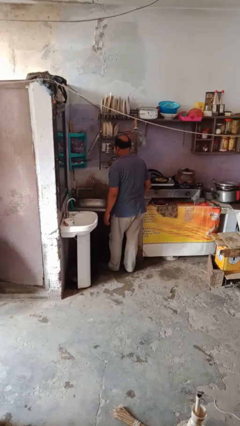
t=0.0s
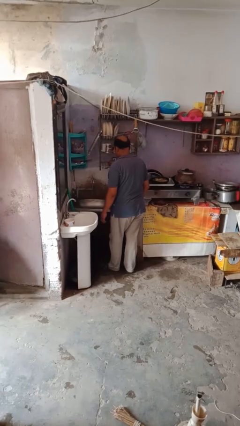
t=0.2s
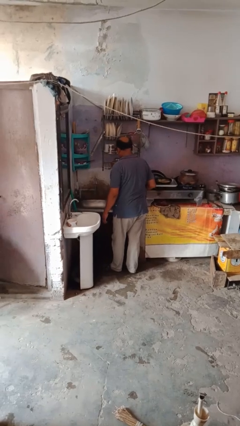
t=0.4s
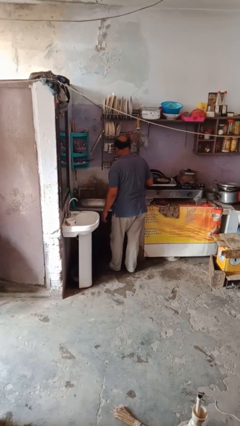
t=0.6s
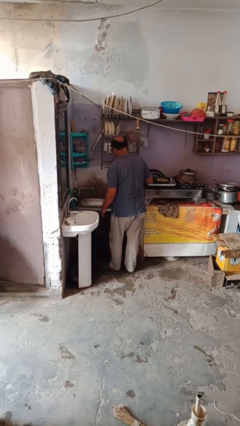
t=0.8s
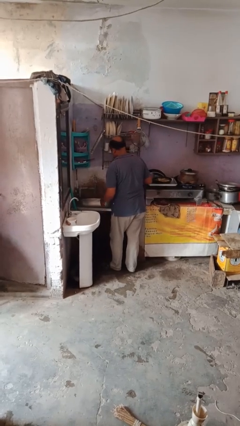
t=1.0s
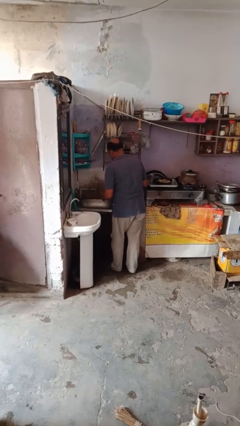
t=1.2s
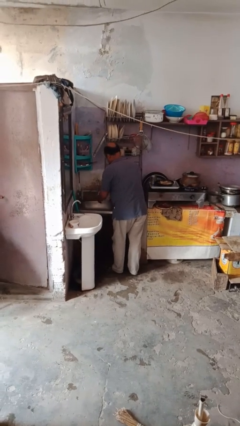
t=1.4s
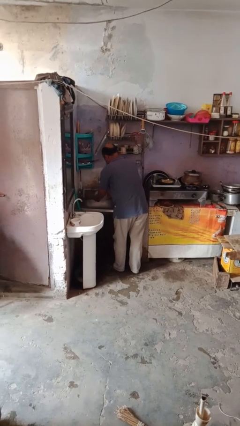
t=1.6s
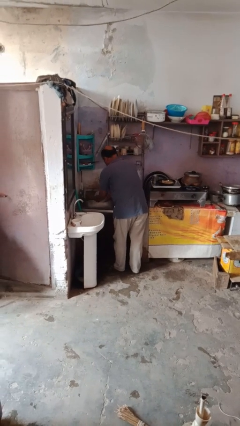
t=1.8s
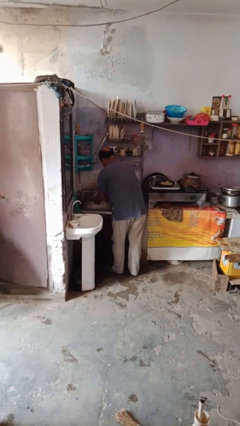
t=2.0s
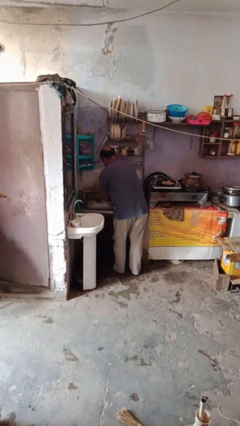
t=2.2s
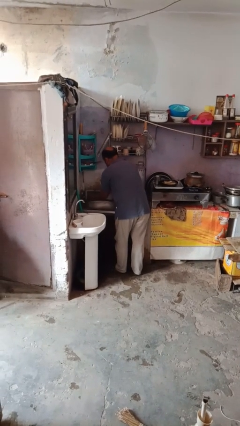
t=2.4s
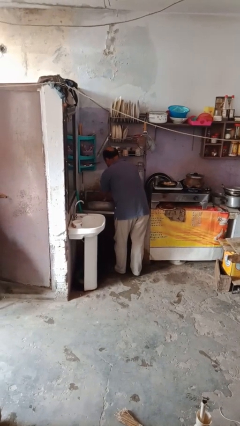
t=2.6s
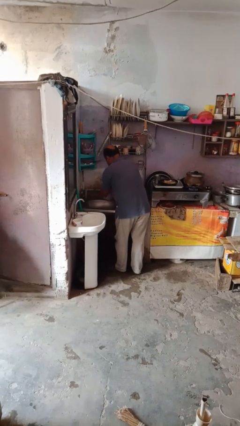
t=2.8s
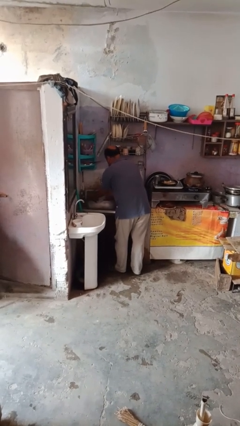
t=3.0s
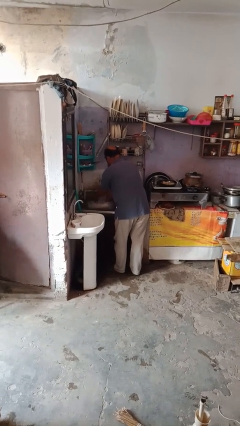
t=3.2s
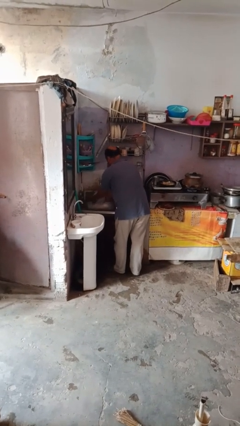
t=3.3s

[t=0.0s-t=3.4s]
person washes dish

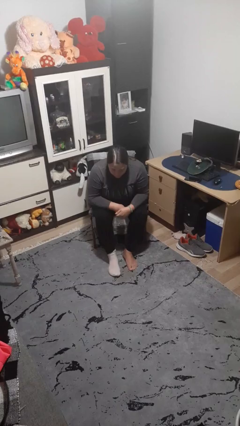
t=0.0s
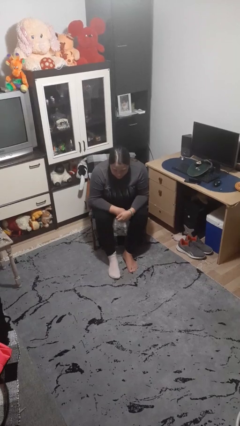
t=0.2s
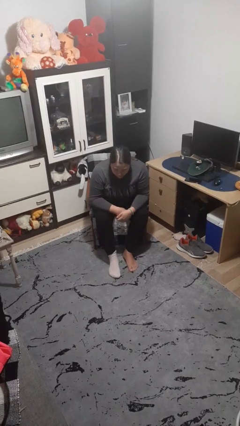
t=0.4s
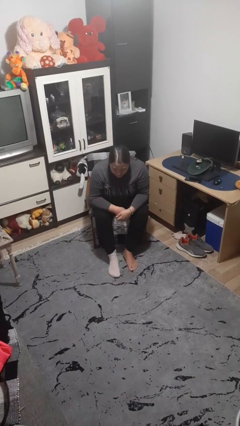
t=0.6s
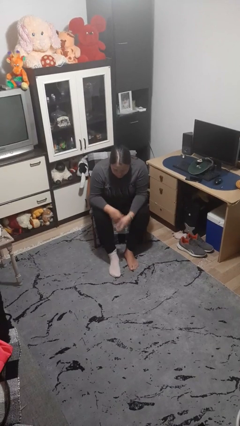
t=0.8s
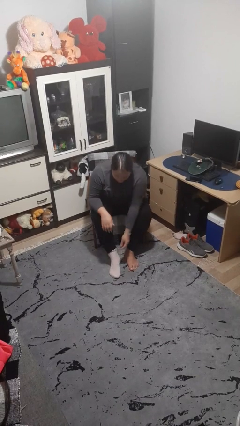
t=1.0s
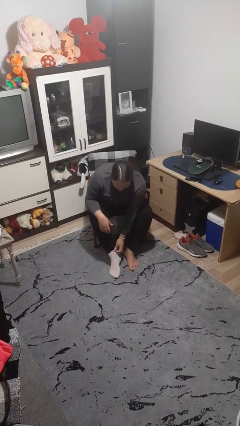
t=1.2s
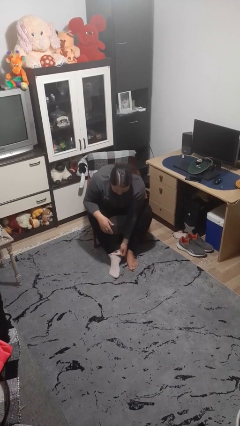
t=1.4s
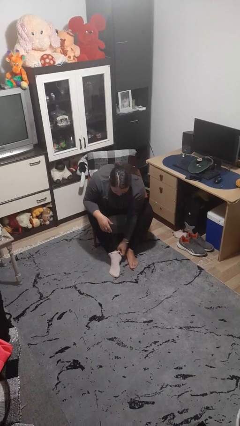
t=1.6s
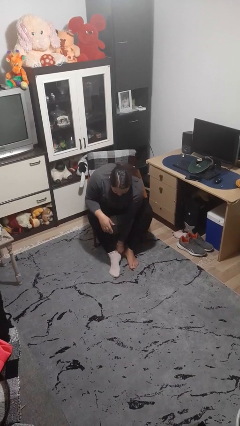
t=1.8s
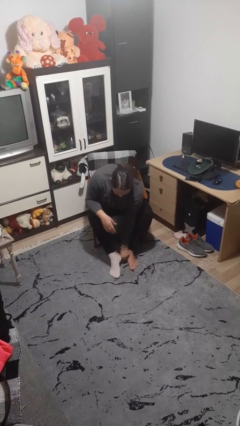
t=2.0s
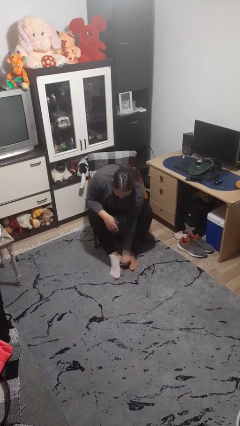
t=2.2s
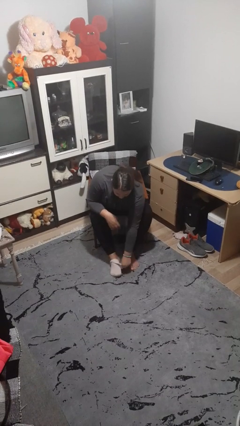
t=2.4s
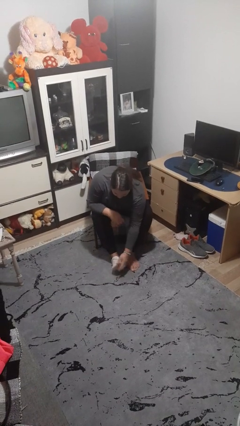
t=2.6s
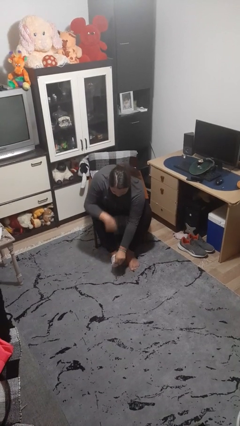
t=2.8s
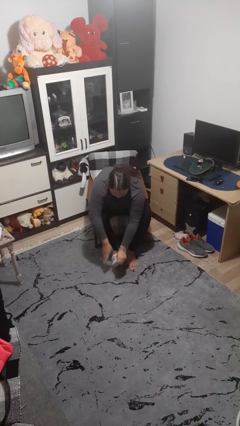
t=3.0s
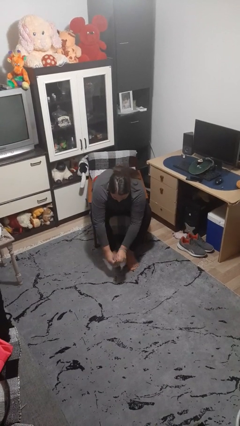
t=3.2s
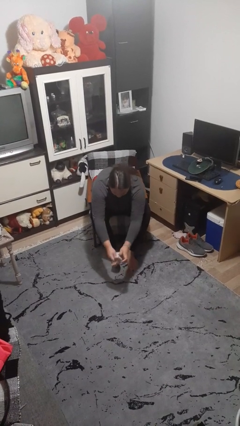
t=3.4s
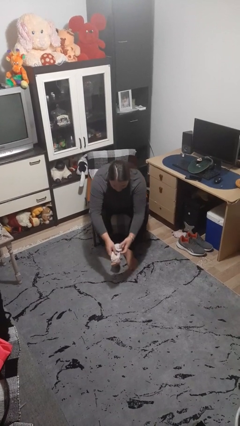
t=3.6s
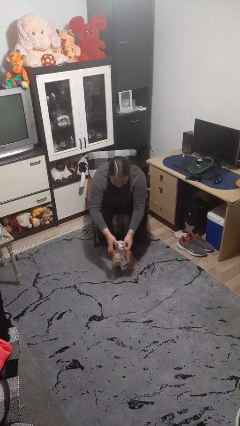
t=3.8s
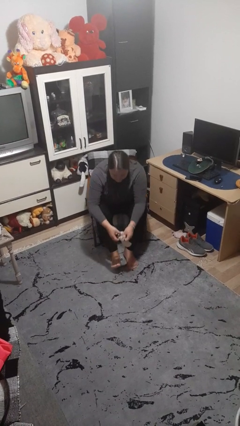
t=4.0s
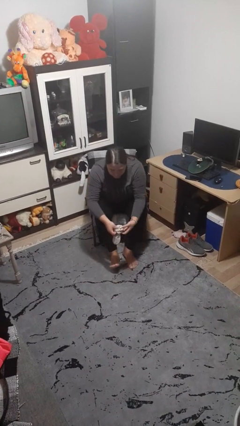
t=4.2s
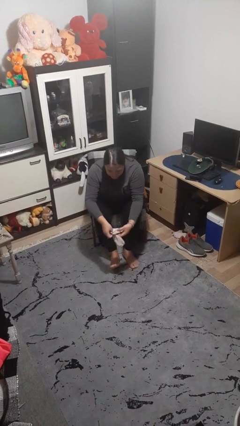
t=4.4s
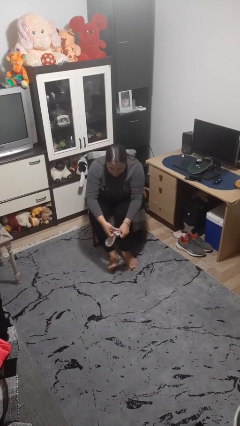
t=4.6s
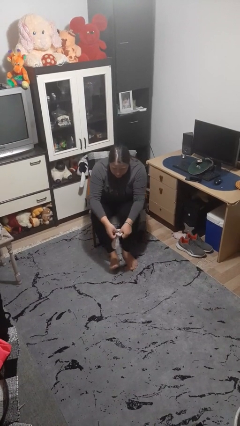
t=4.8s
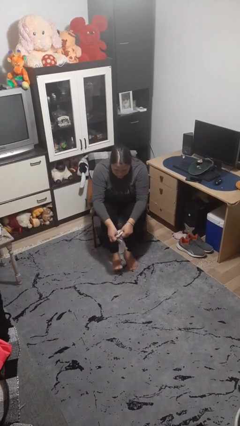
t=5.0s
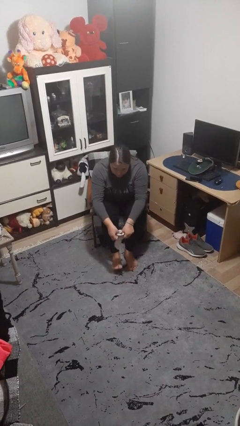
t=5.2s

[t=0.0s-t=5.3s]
person takes off socks

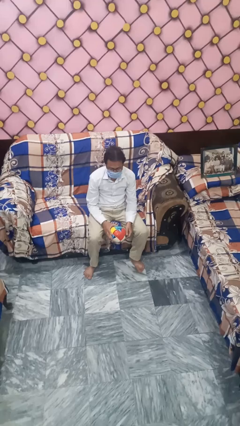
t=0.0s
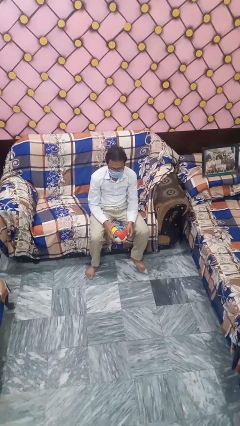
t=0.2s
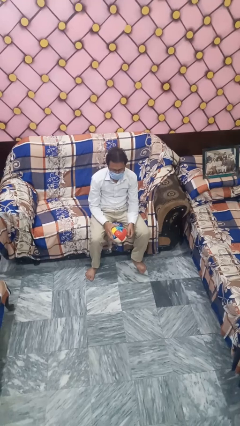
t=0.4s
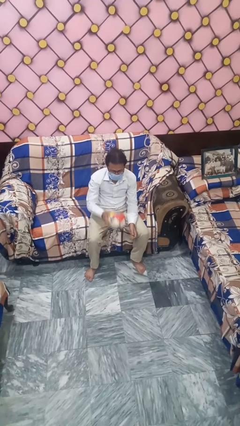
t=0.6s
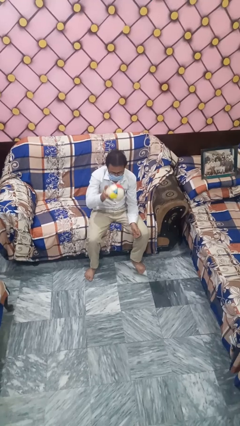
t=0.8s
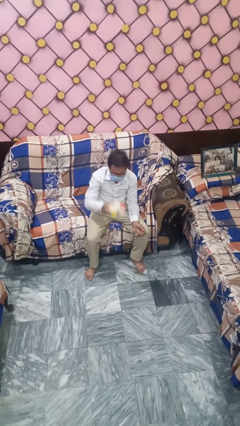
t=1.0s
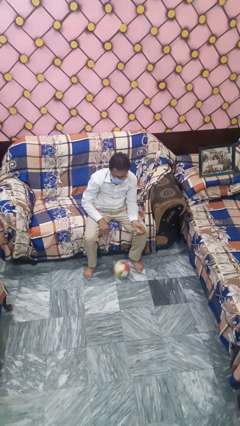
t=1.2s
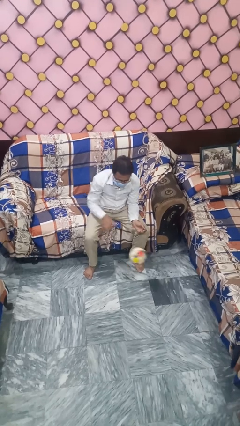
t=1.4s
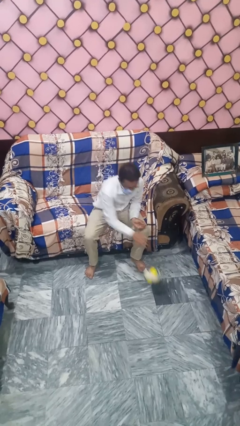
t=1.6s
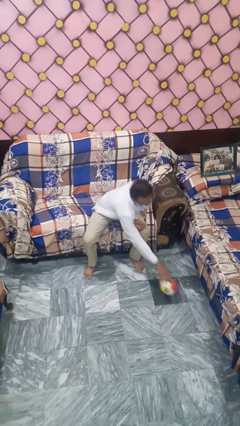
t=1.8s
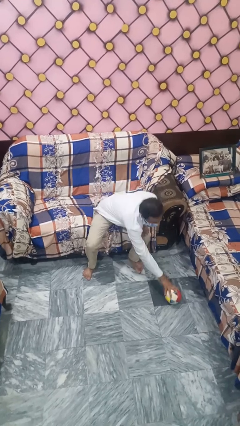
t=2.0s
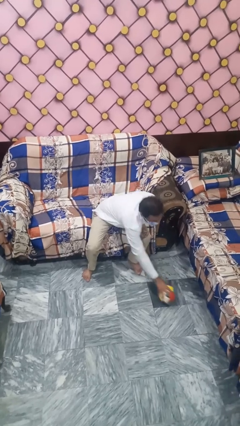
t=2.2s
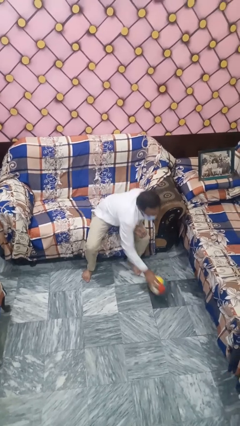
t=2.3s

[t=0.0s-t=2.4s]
person bounces ball on floor

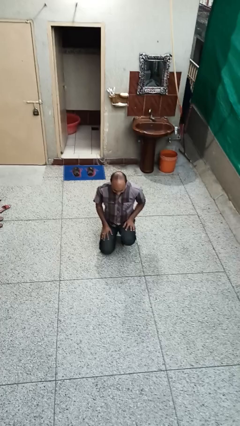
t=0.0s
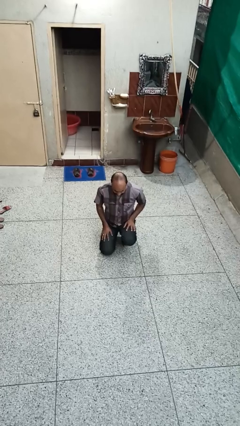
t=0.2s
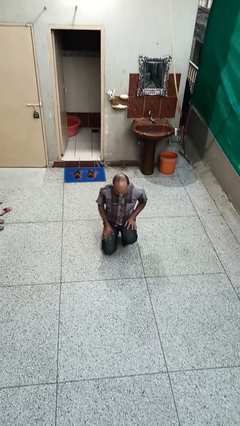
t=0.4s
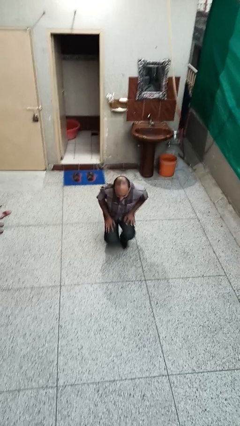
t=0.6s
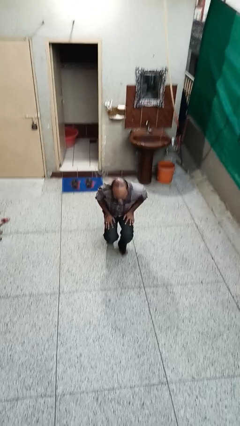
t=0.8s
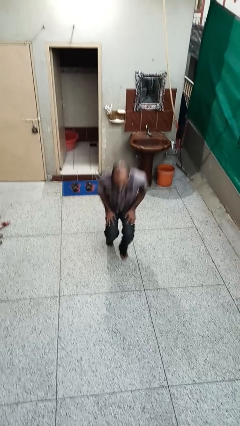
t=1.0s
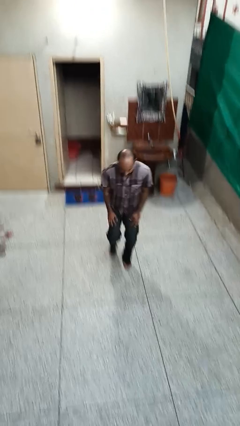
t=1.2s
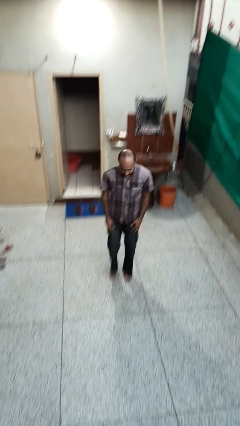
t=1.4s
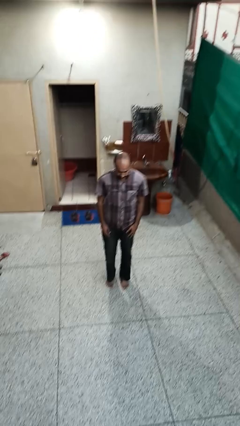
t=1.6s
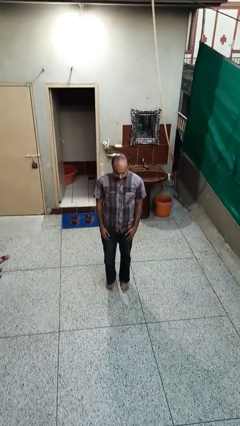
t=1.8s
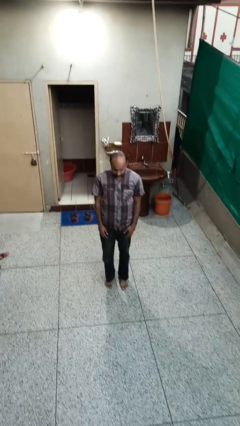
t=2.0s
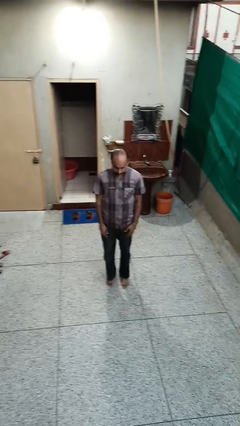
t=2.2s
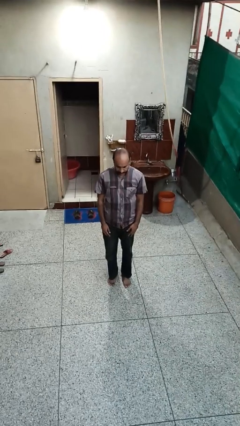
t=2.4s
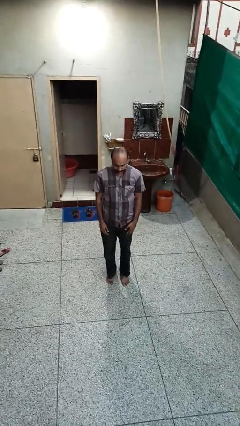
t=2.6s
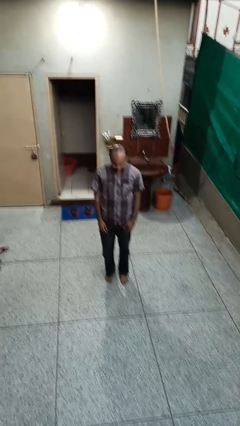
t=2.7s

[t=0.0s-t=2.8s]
person stands up from floor

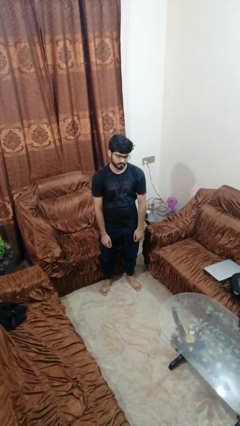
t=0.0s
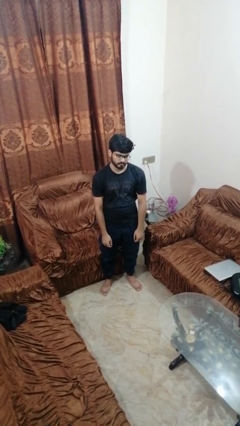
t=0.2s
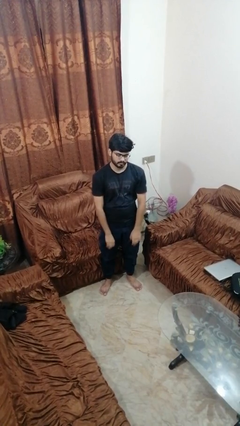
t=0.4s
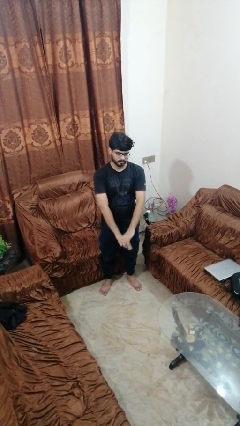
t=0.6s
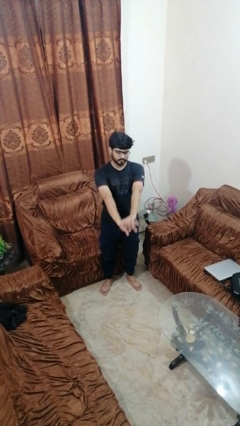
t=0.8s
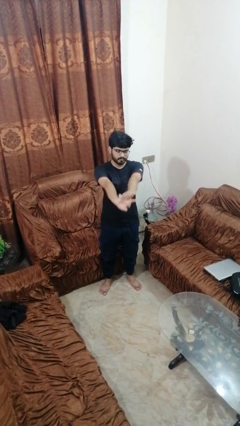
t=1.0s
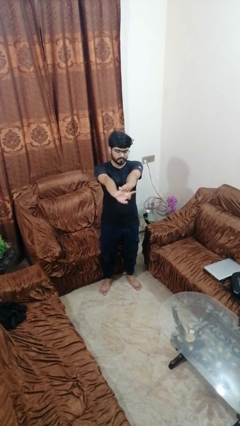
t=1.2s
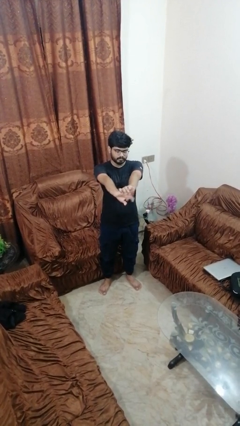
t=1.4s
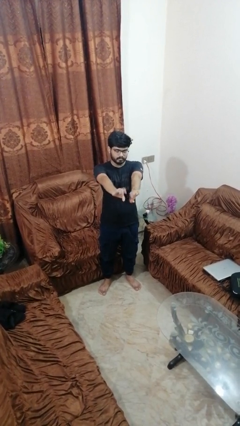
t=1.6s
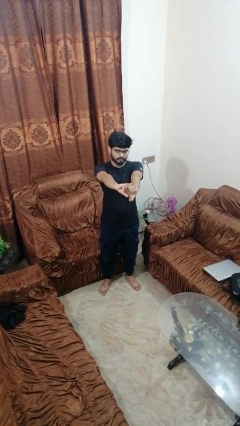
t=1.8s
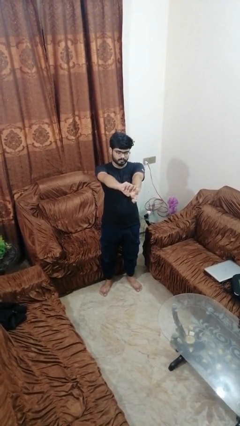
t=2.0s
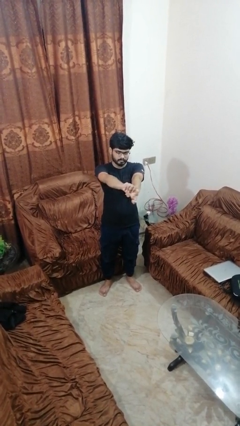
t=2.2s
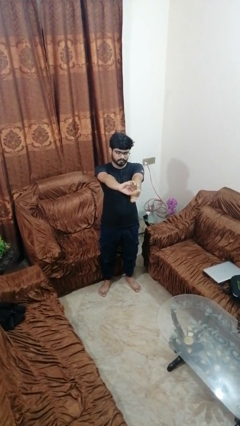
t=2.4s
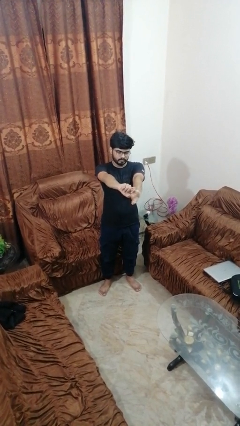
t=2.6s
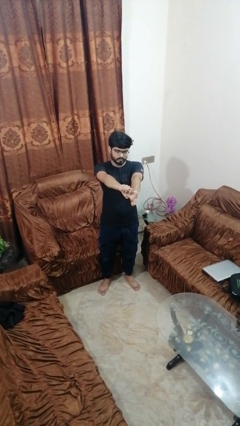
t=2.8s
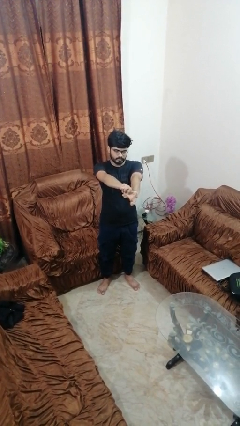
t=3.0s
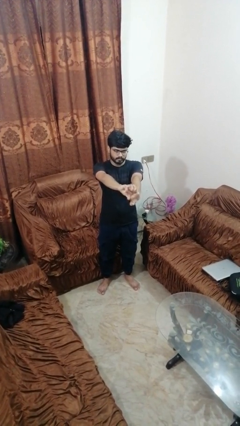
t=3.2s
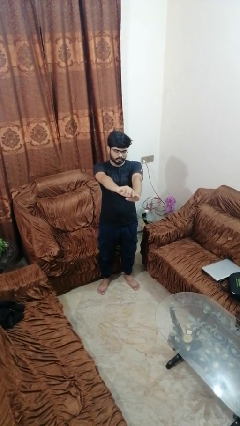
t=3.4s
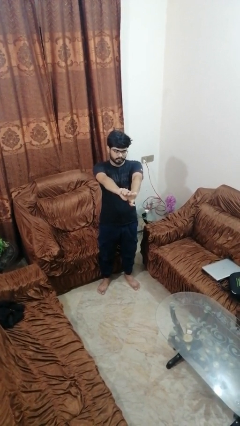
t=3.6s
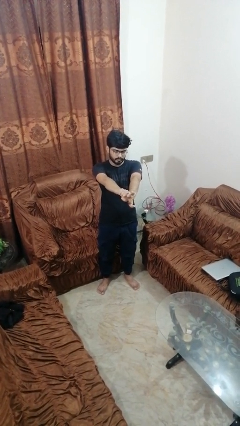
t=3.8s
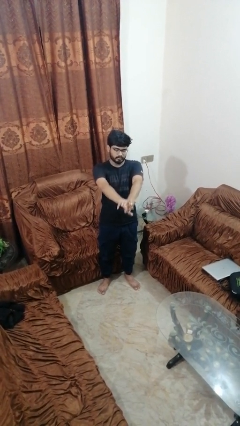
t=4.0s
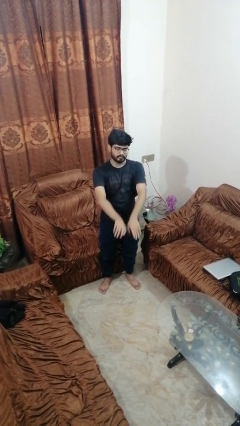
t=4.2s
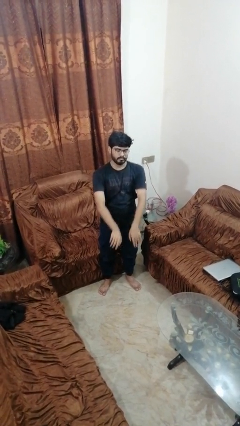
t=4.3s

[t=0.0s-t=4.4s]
person cracks knuckles
